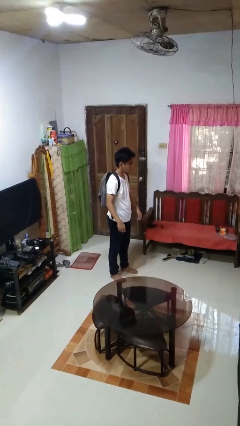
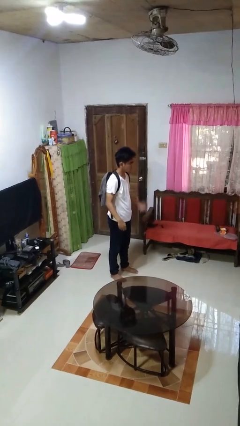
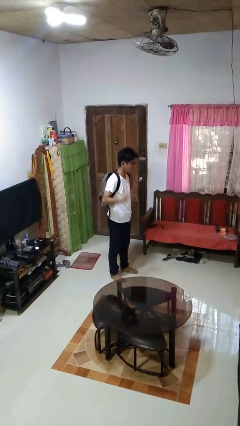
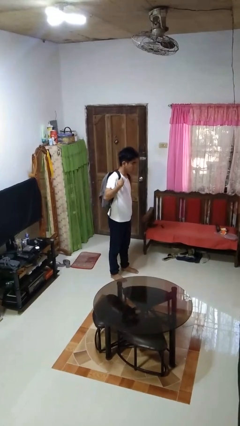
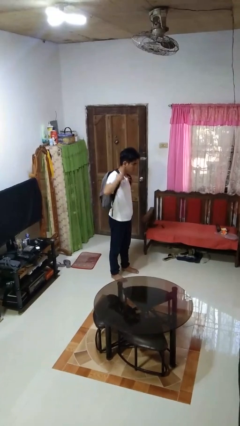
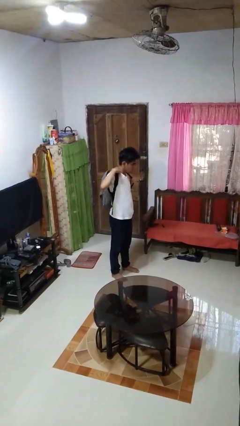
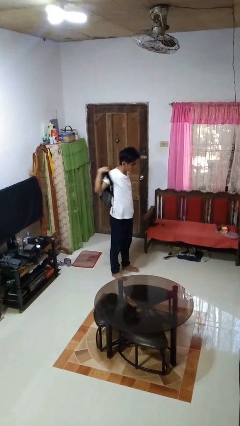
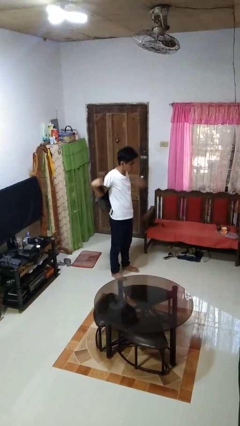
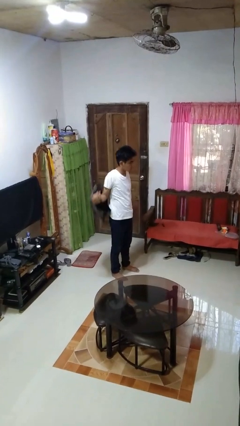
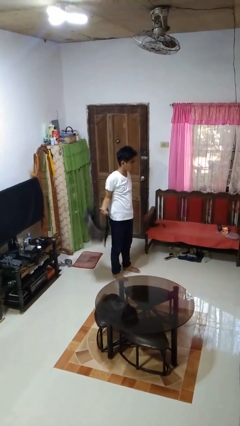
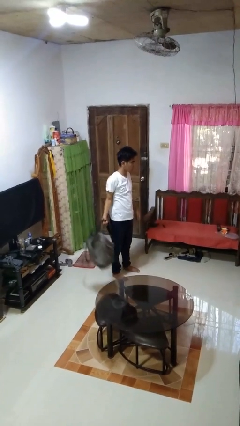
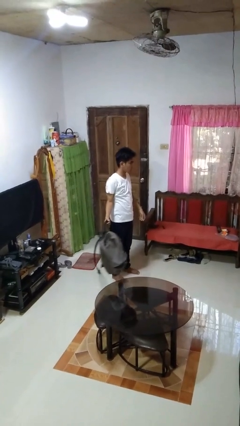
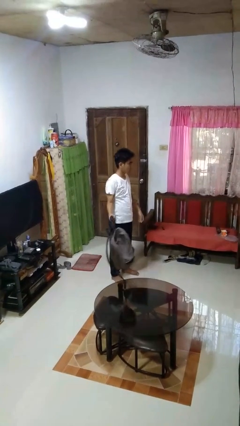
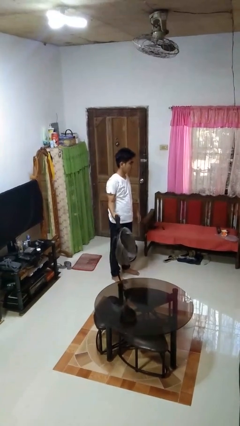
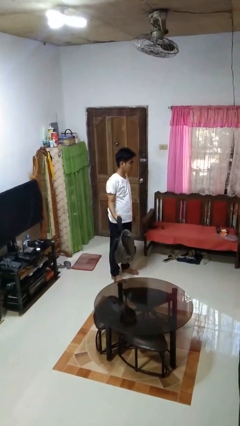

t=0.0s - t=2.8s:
person takes off backpack

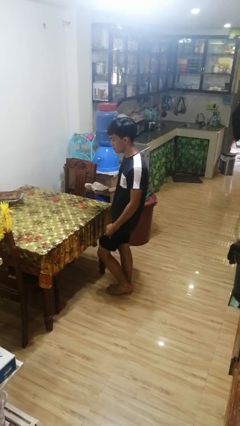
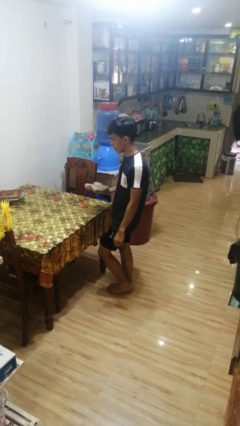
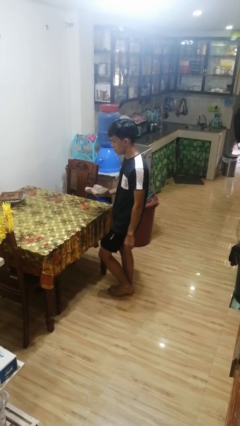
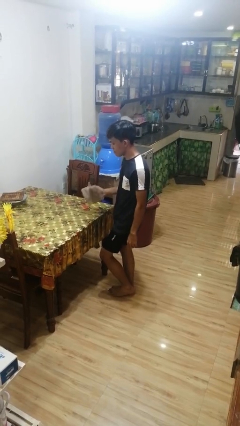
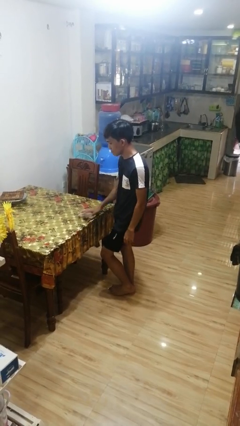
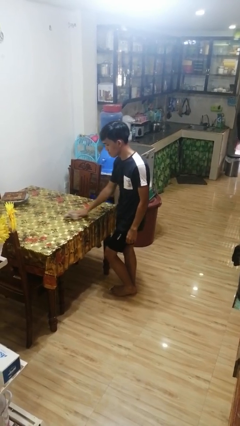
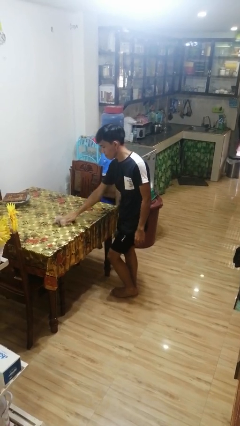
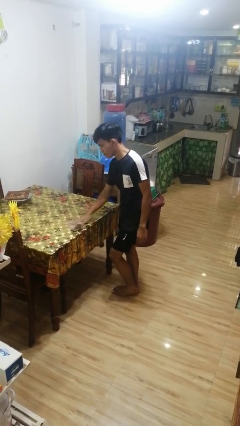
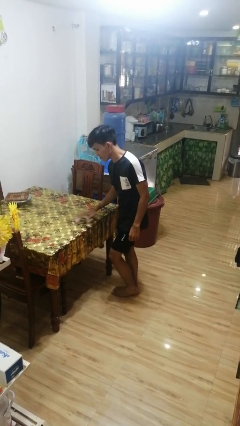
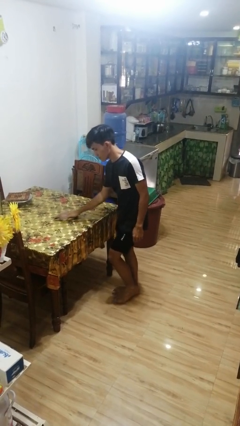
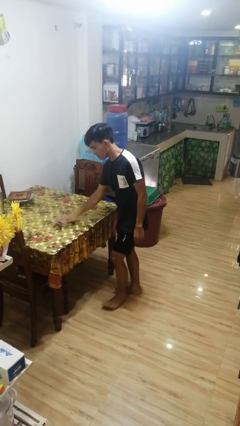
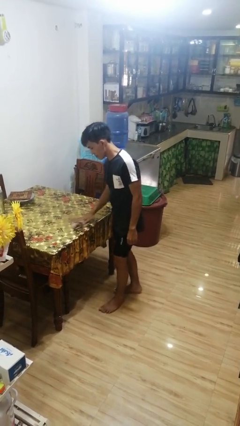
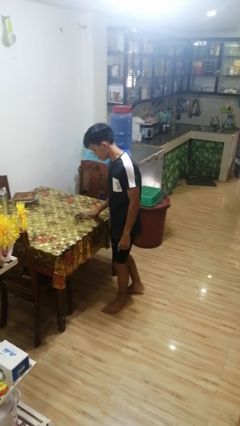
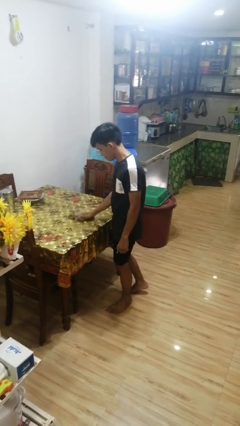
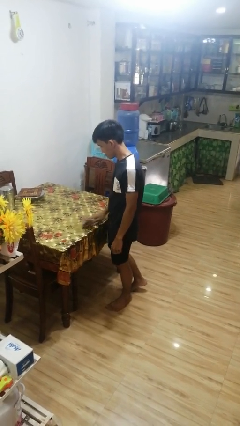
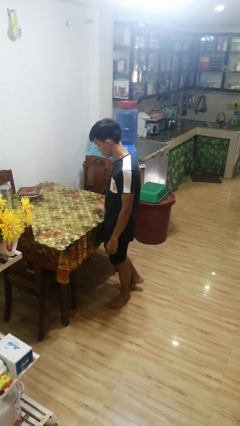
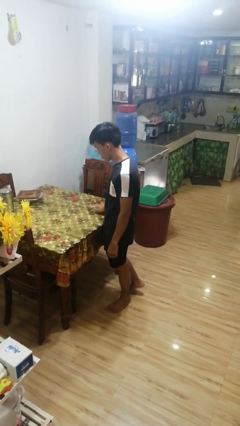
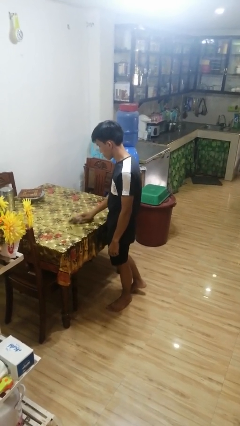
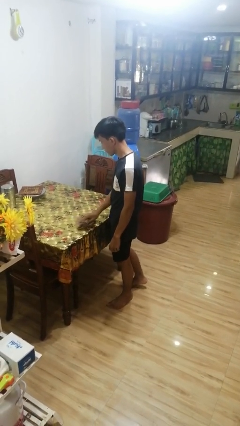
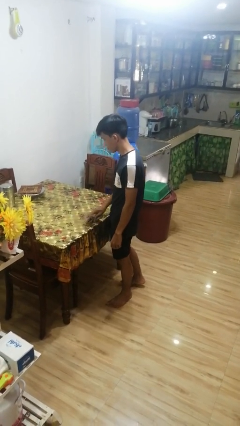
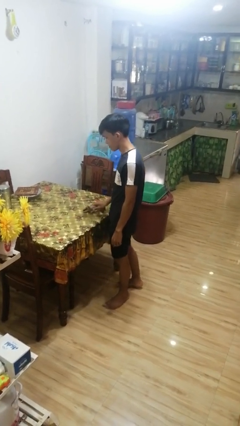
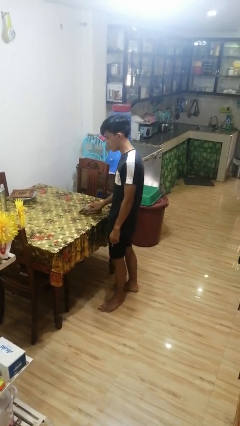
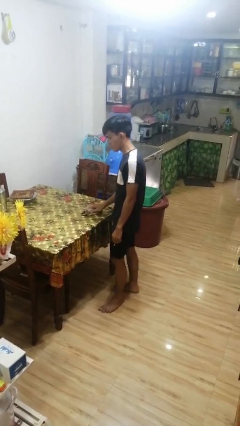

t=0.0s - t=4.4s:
person cleans table with rag

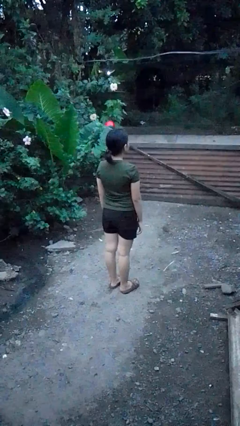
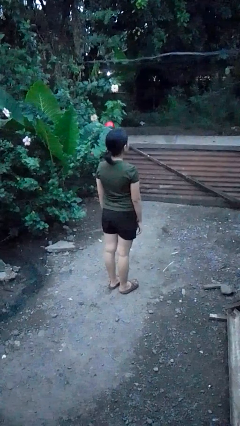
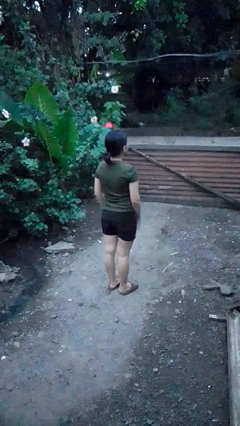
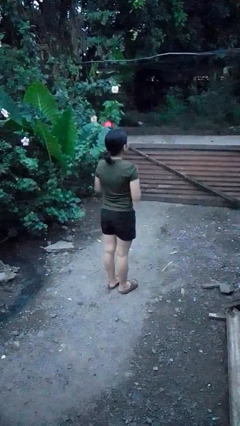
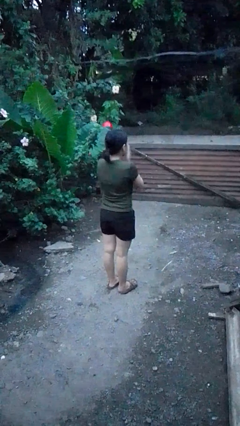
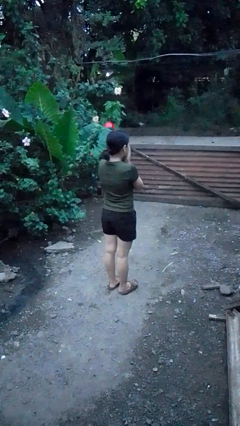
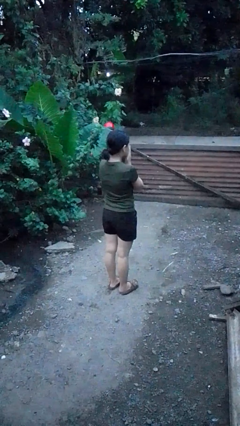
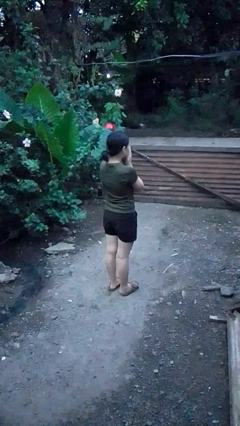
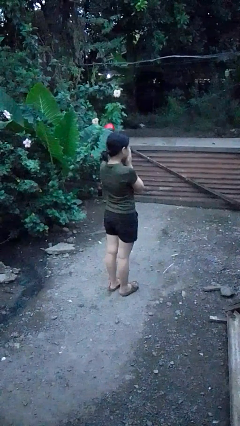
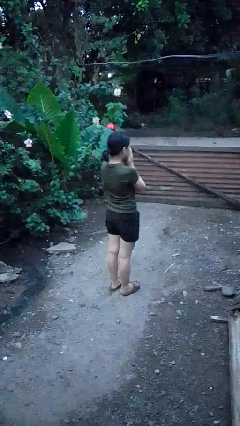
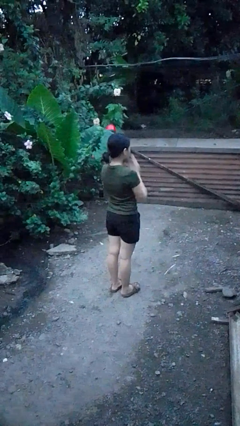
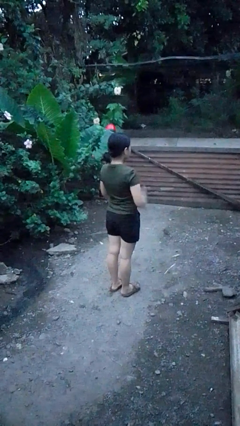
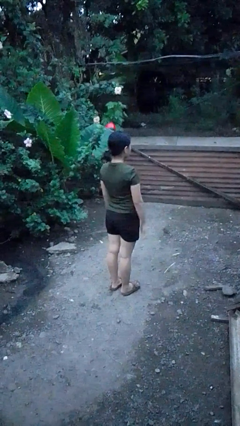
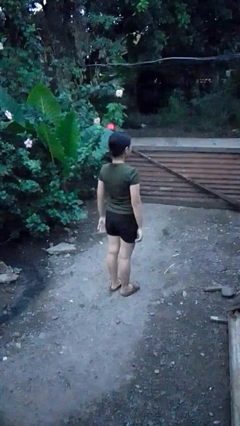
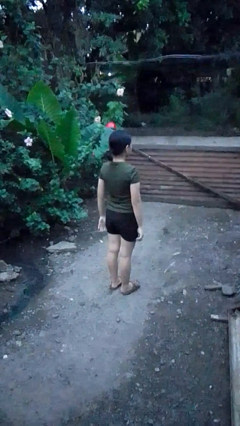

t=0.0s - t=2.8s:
person blows into hands

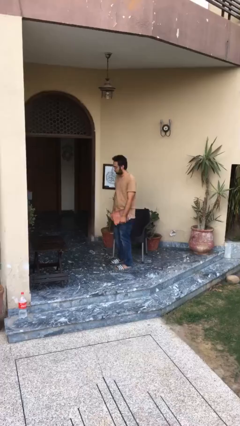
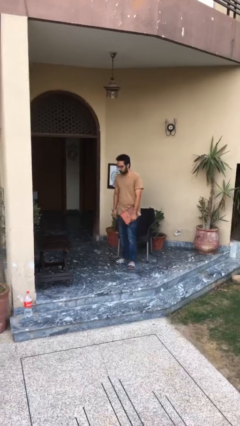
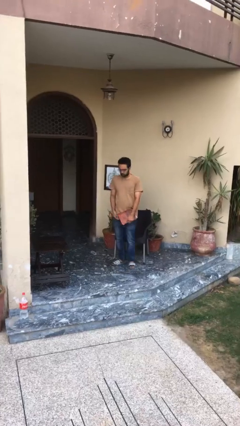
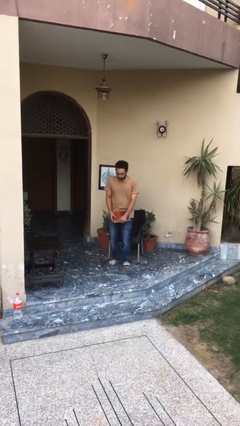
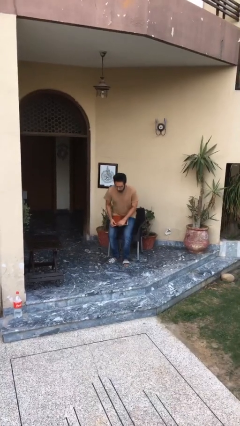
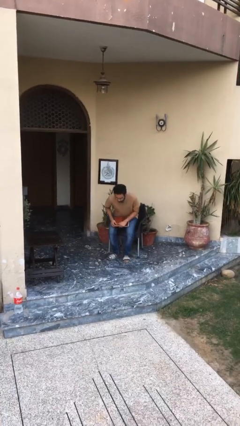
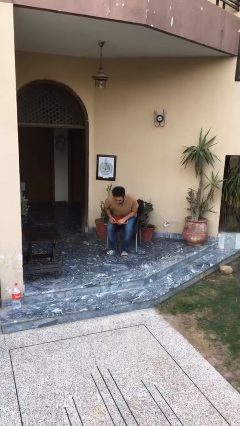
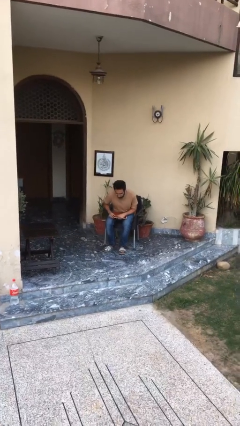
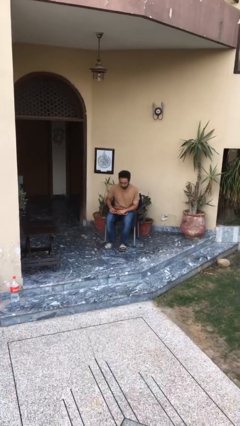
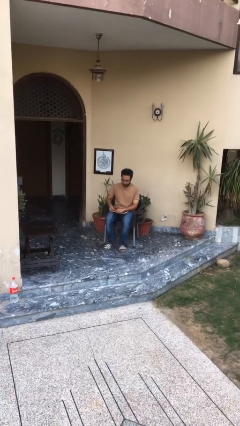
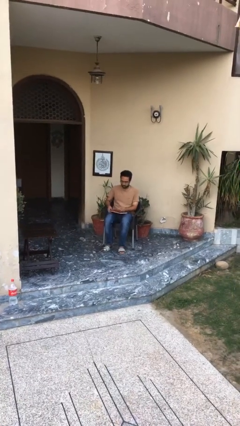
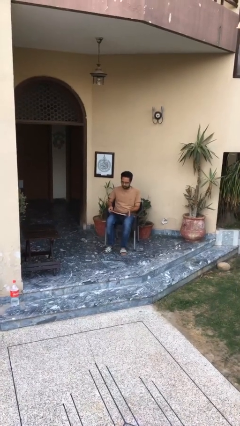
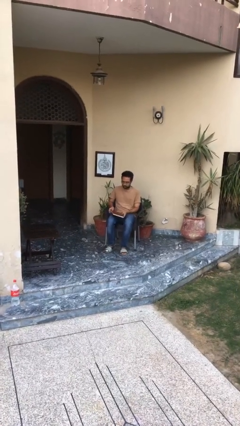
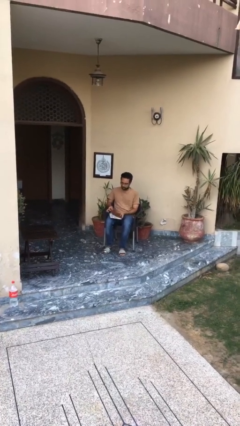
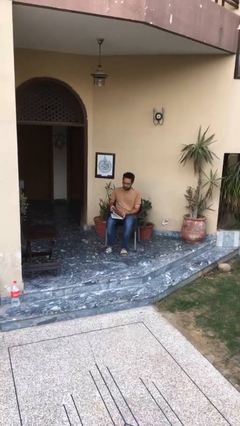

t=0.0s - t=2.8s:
person sits down

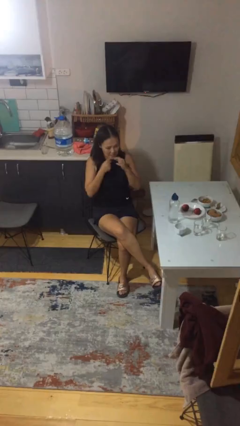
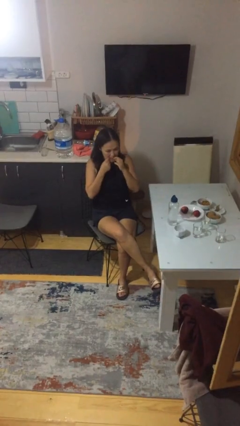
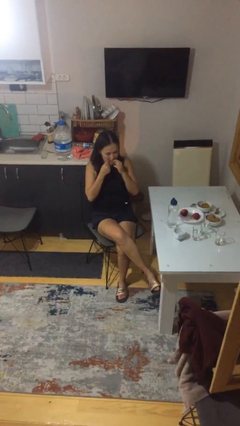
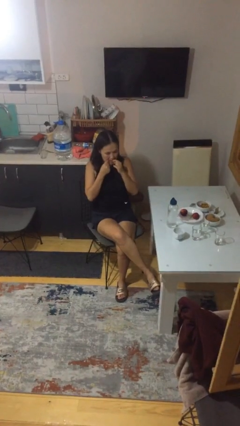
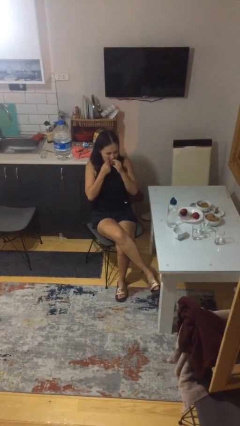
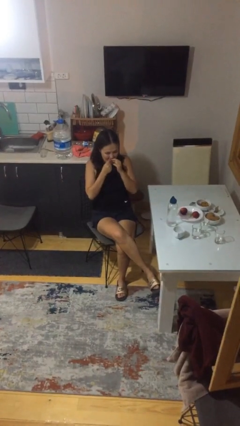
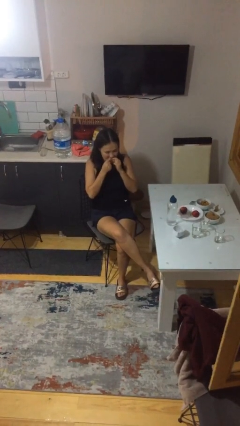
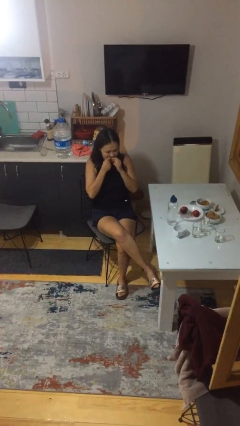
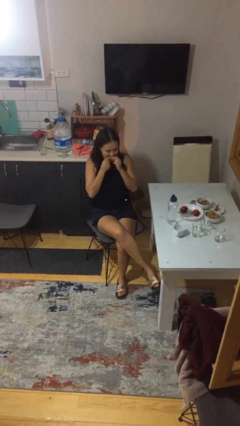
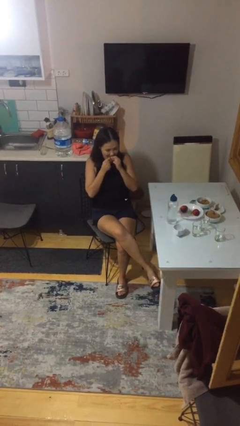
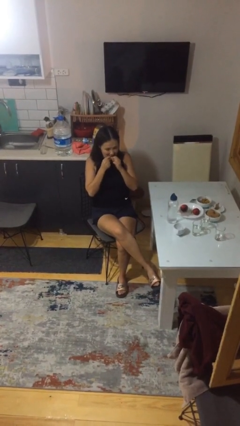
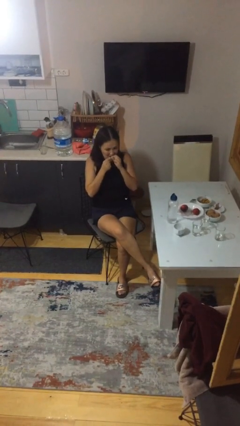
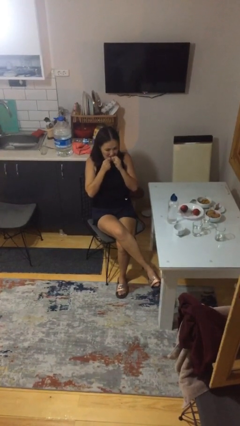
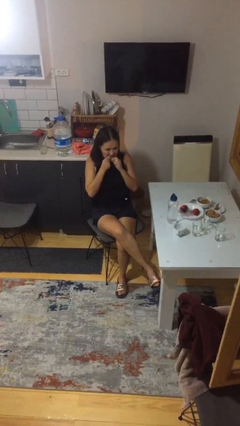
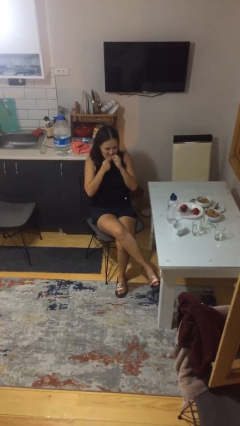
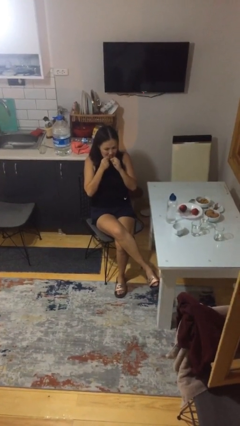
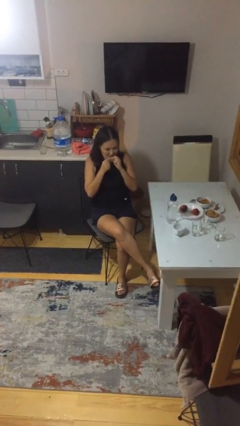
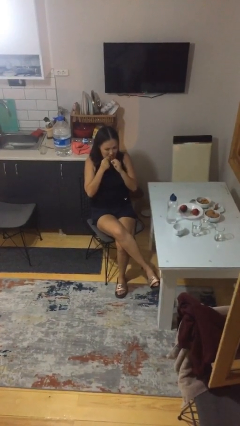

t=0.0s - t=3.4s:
person flosses

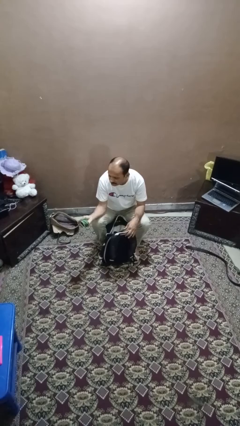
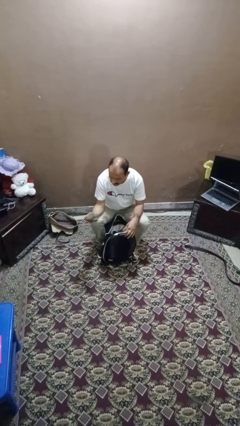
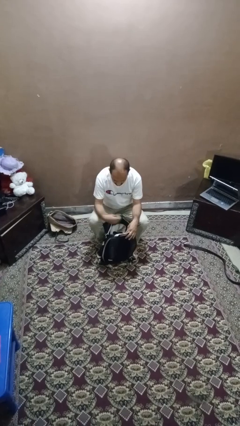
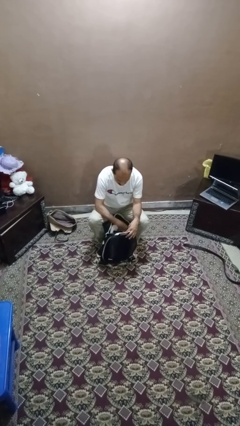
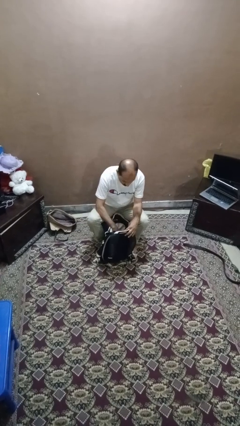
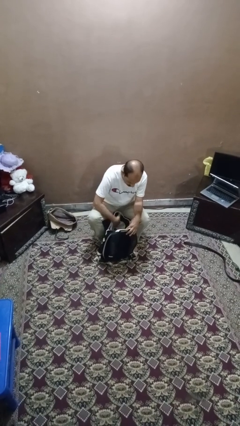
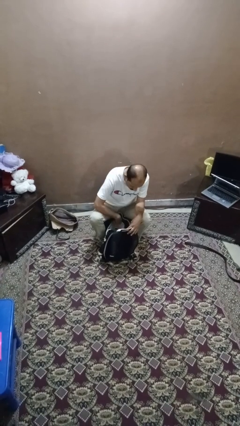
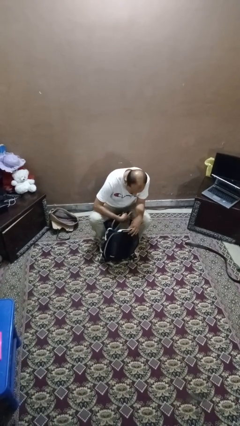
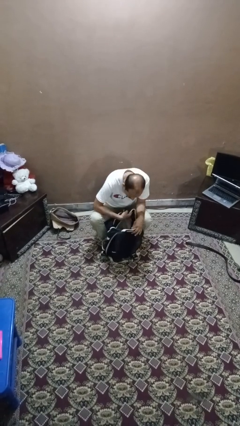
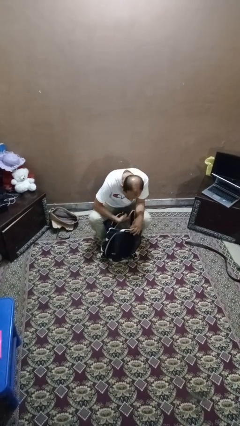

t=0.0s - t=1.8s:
person puts object into backpack
